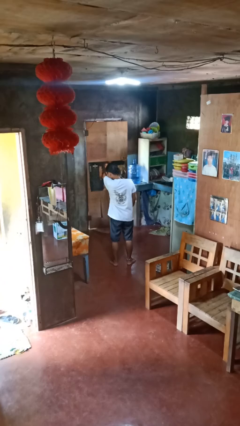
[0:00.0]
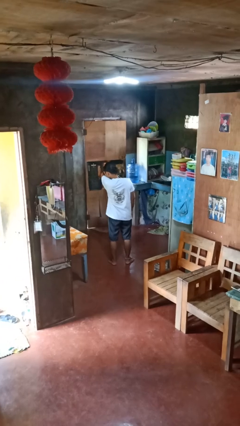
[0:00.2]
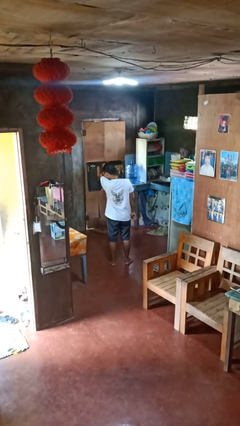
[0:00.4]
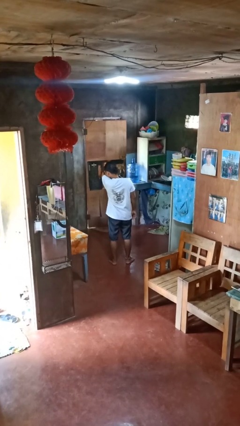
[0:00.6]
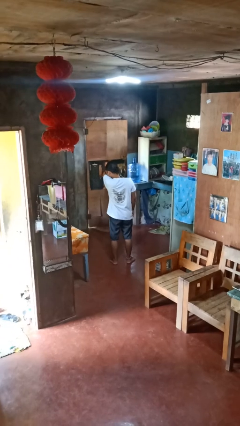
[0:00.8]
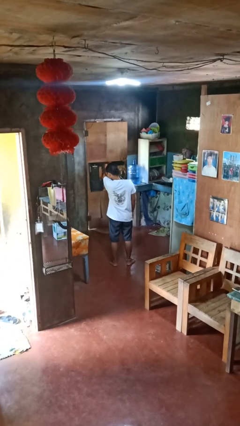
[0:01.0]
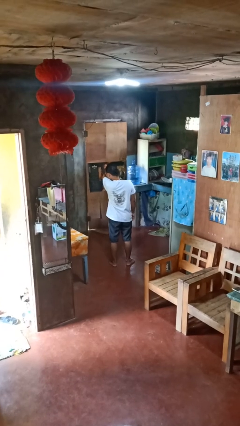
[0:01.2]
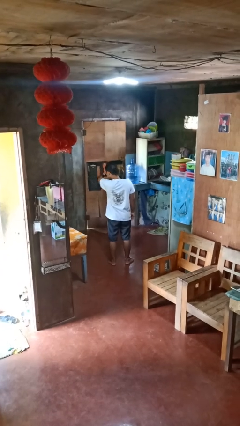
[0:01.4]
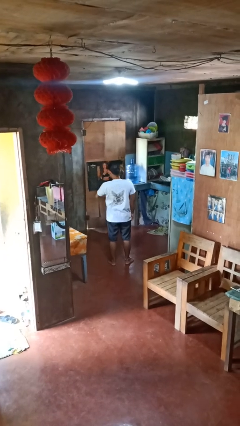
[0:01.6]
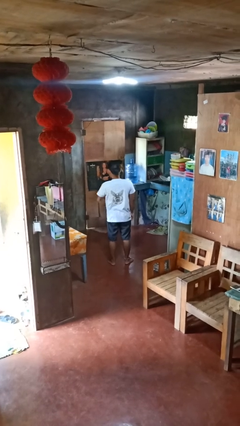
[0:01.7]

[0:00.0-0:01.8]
person sneezes into arm

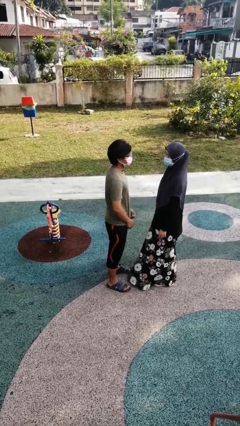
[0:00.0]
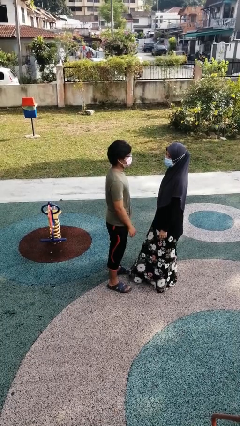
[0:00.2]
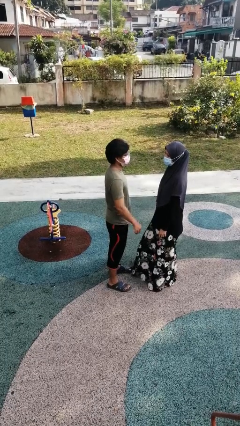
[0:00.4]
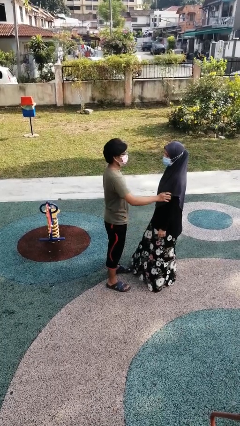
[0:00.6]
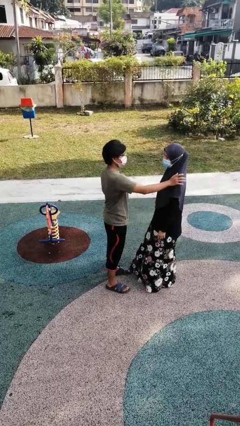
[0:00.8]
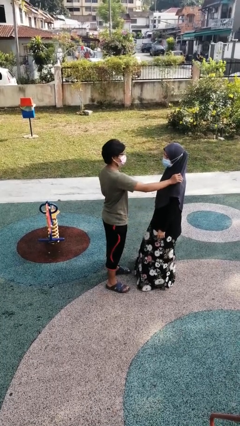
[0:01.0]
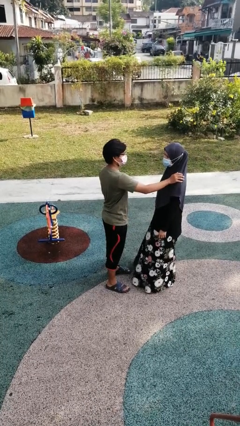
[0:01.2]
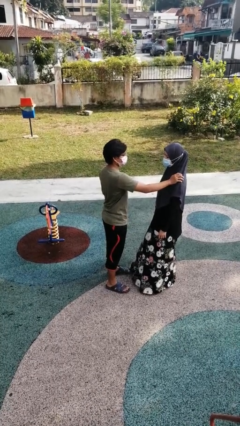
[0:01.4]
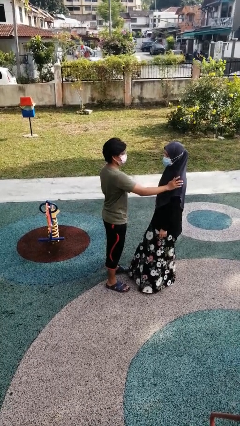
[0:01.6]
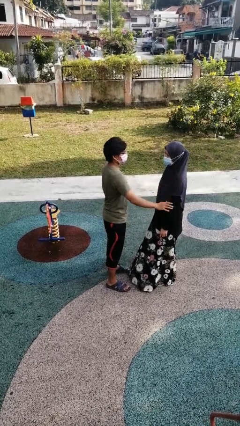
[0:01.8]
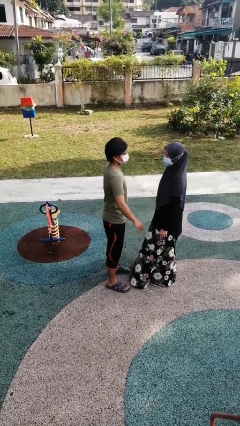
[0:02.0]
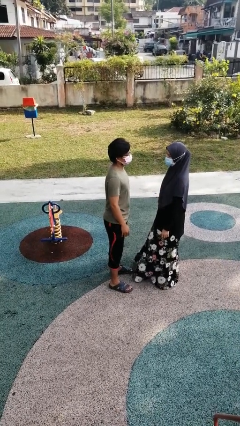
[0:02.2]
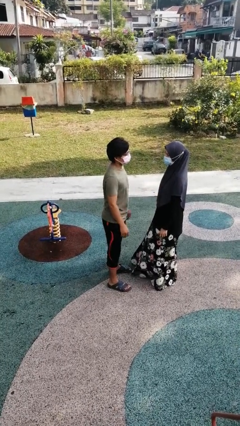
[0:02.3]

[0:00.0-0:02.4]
person pounds shoulders of person

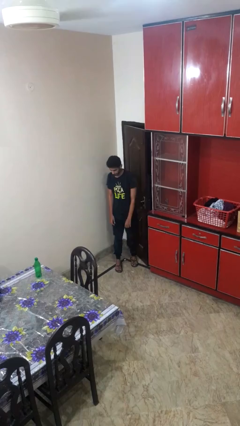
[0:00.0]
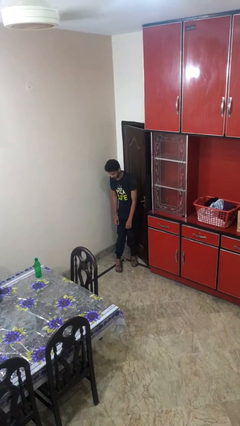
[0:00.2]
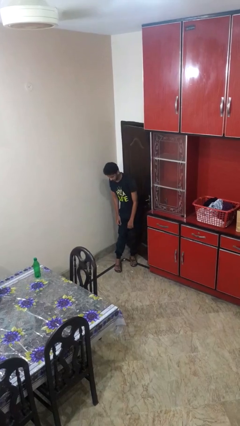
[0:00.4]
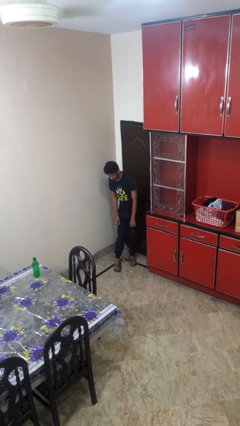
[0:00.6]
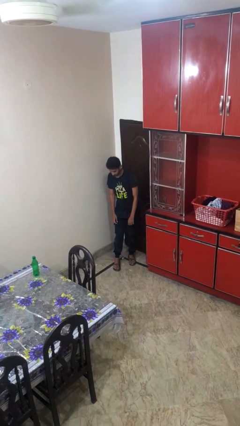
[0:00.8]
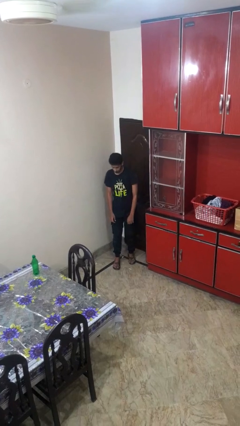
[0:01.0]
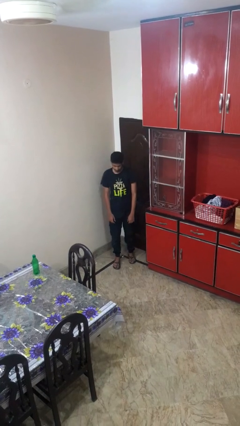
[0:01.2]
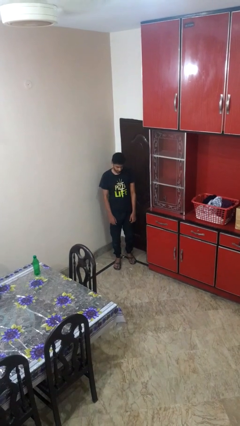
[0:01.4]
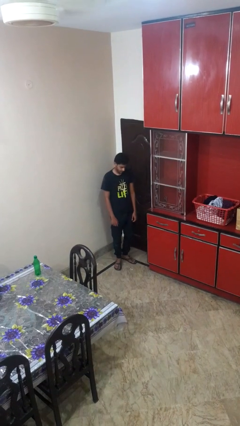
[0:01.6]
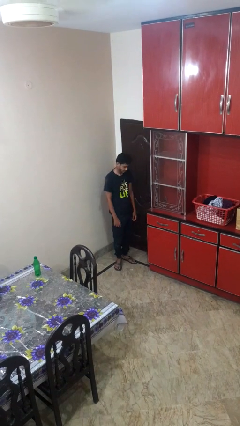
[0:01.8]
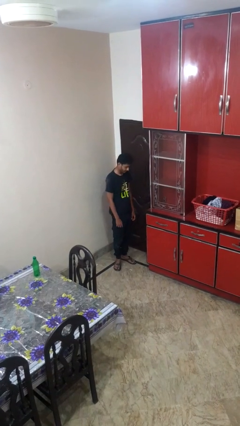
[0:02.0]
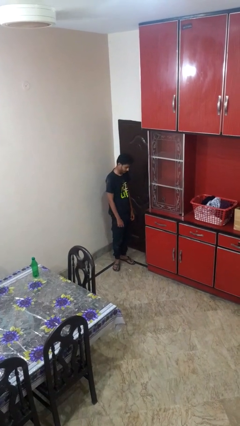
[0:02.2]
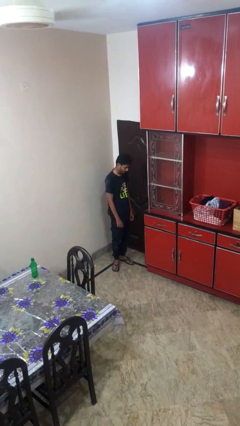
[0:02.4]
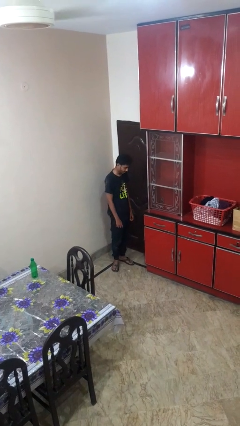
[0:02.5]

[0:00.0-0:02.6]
person closes door with hip

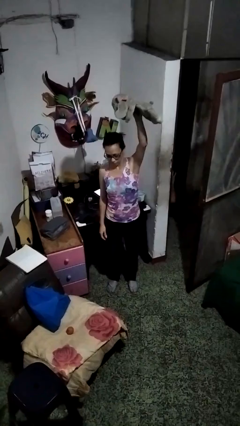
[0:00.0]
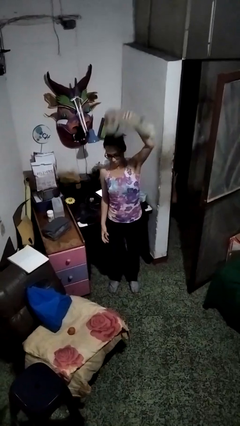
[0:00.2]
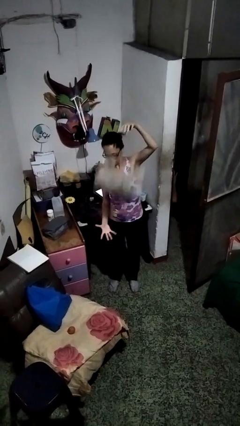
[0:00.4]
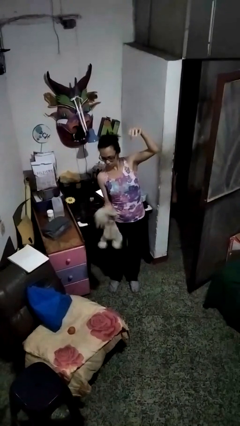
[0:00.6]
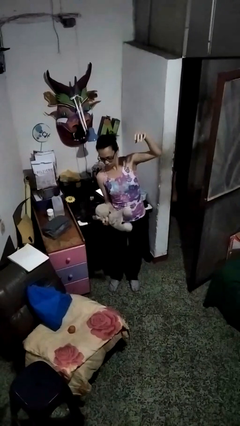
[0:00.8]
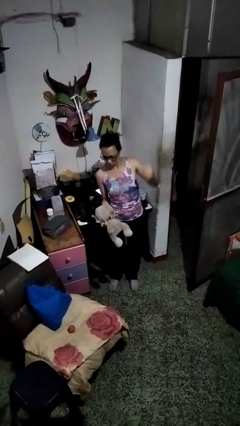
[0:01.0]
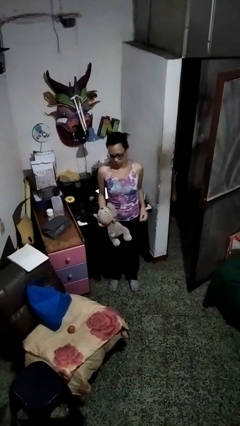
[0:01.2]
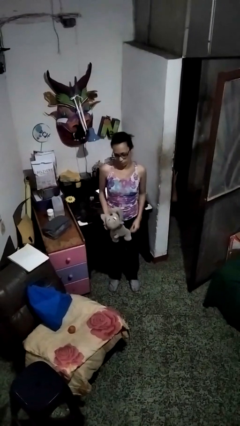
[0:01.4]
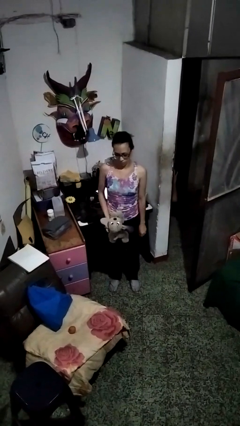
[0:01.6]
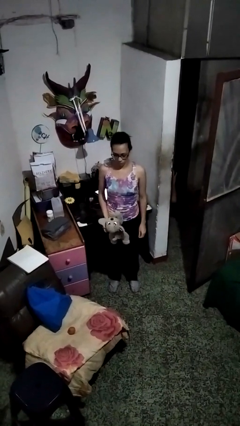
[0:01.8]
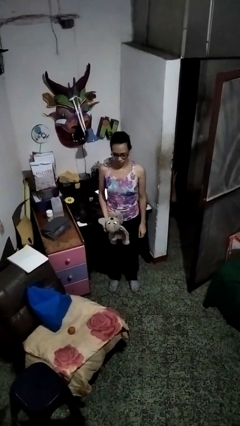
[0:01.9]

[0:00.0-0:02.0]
person catches dropped object

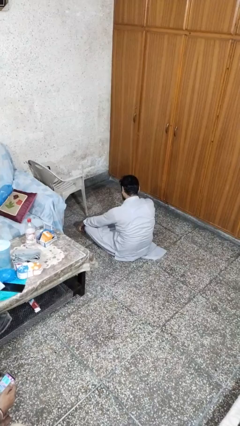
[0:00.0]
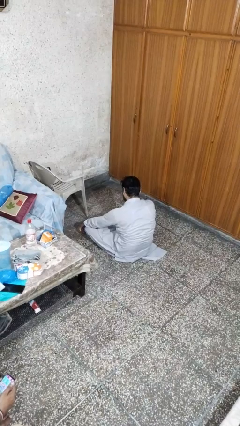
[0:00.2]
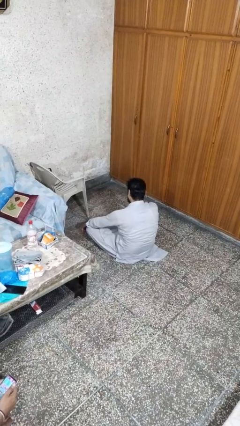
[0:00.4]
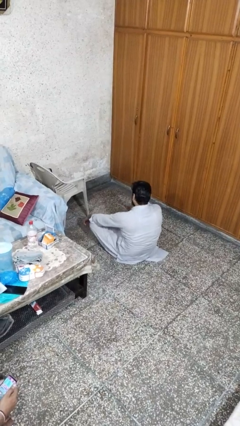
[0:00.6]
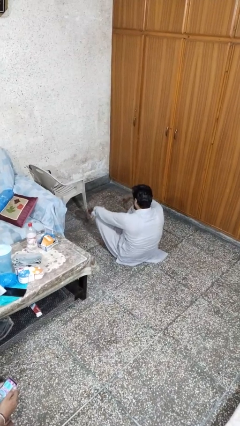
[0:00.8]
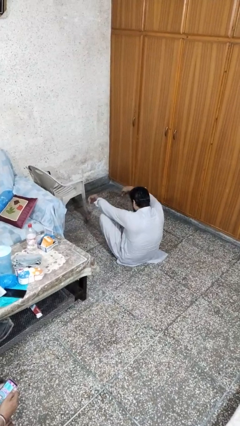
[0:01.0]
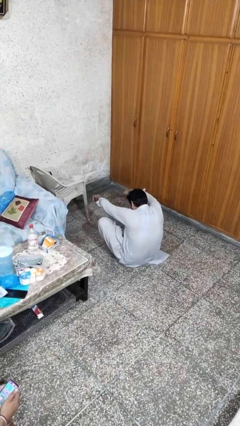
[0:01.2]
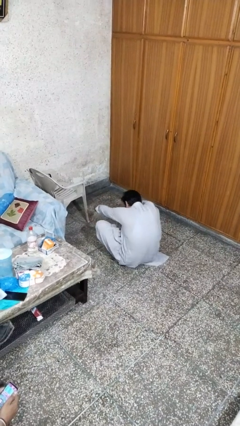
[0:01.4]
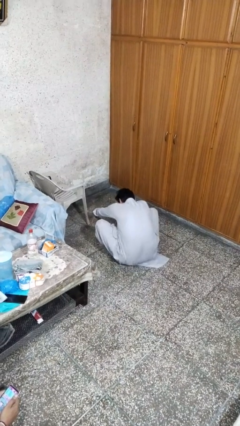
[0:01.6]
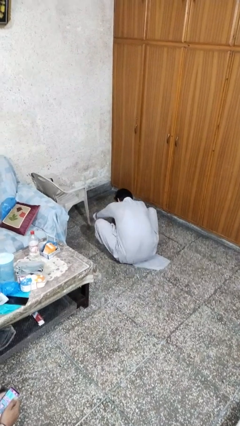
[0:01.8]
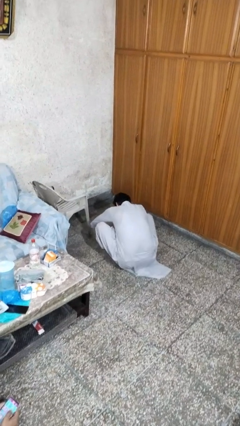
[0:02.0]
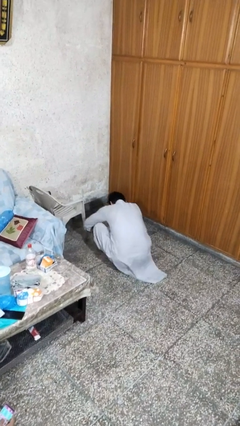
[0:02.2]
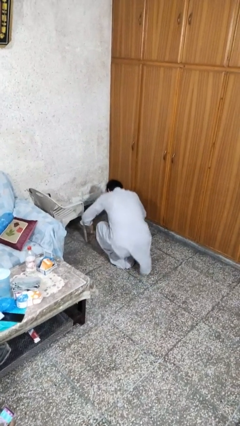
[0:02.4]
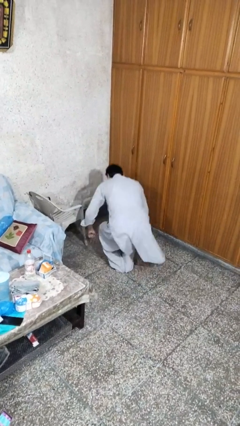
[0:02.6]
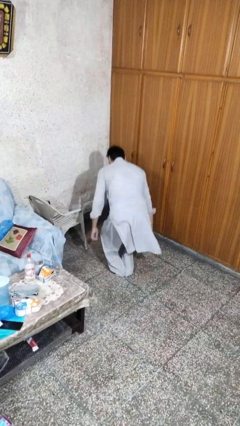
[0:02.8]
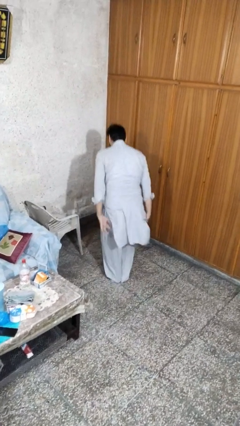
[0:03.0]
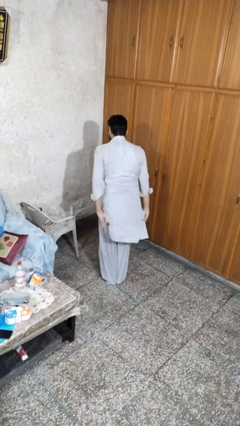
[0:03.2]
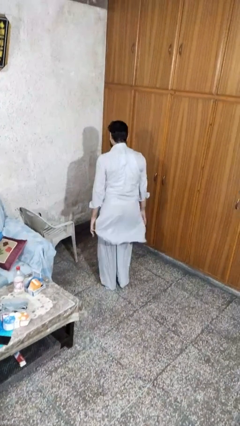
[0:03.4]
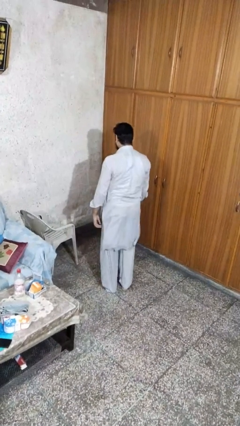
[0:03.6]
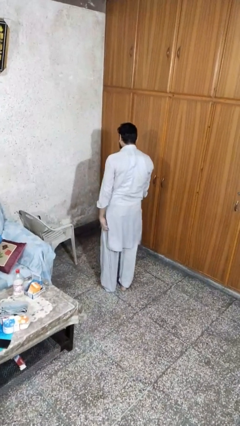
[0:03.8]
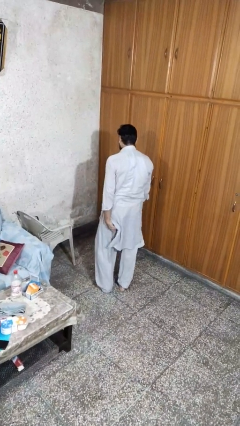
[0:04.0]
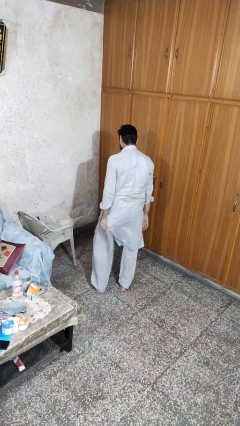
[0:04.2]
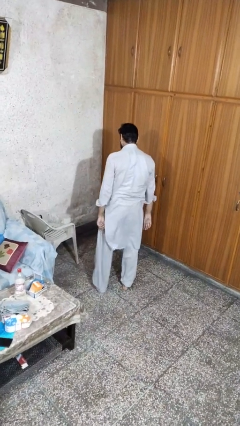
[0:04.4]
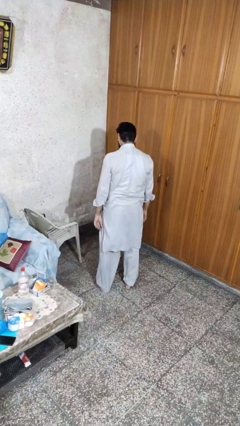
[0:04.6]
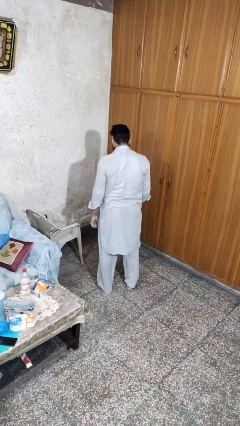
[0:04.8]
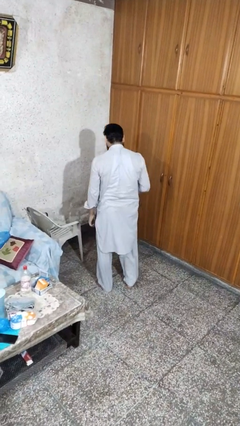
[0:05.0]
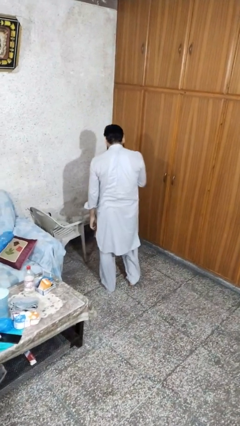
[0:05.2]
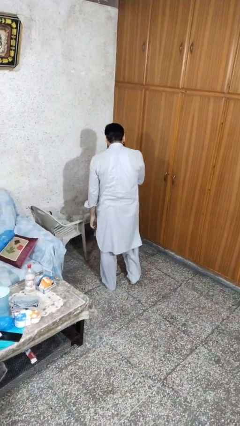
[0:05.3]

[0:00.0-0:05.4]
person stands up from floor

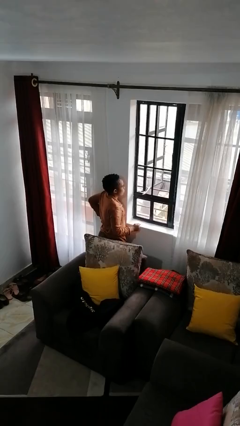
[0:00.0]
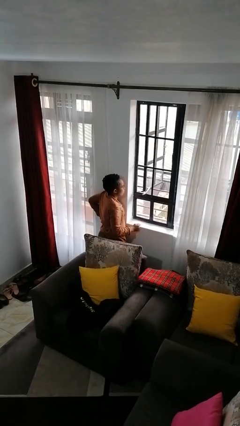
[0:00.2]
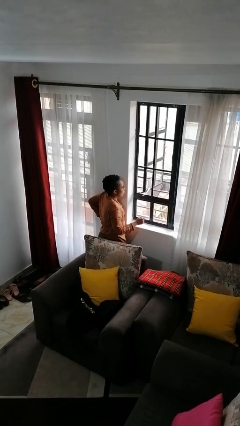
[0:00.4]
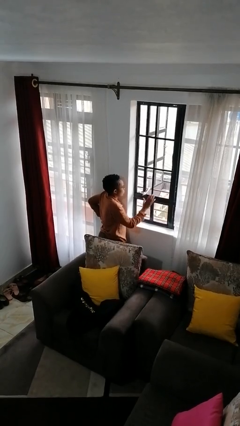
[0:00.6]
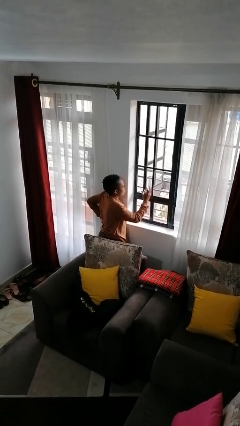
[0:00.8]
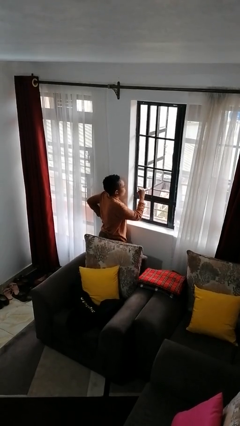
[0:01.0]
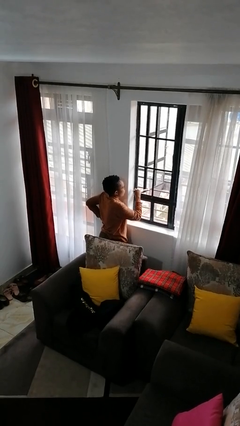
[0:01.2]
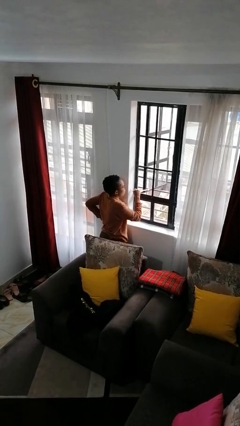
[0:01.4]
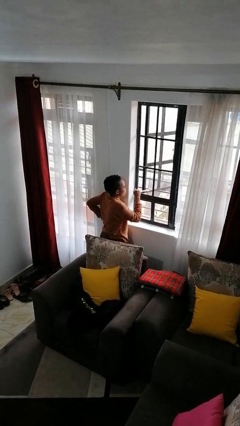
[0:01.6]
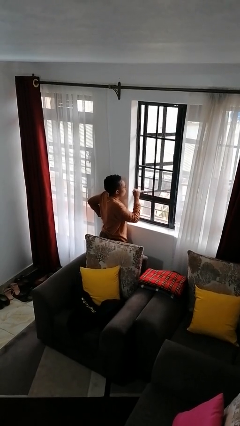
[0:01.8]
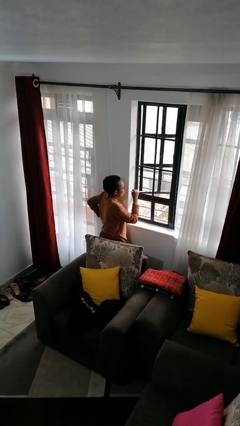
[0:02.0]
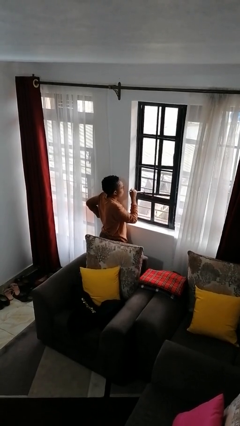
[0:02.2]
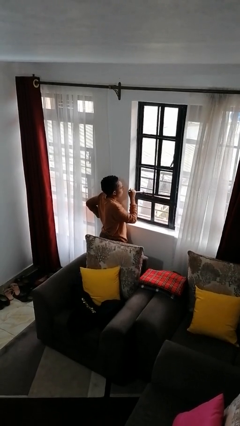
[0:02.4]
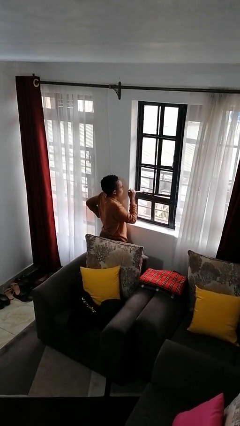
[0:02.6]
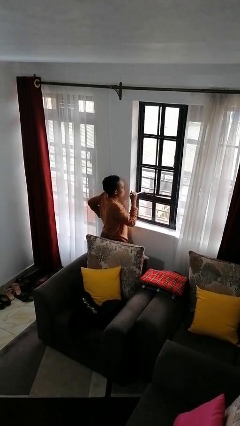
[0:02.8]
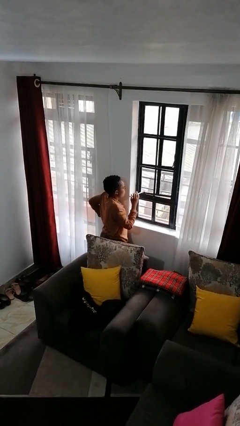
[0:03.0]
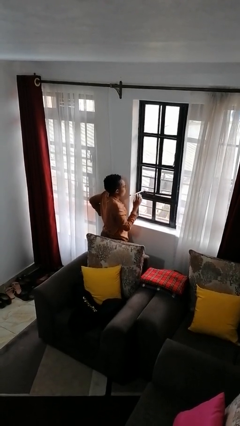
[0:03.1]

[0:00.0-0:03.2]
person closes home window
